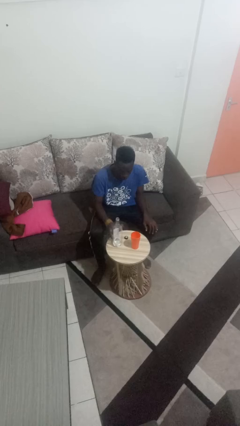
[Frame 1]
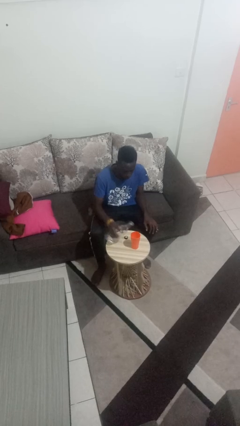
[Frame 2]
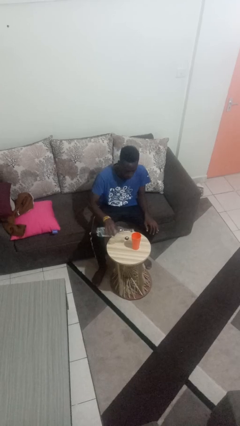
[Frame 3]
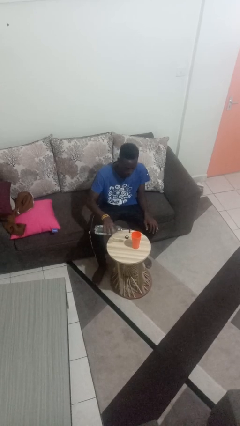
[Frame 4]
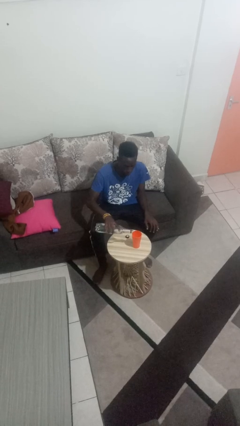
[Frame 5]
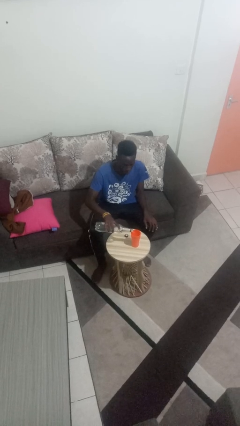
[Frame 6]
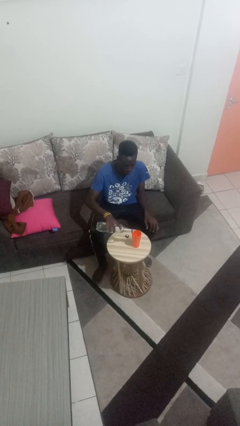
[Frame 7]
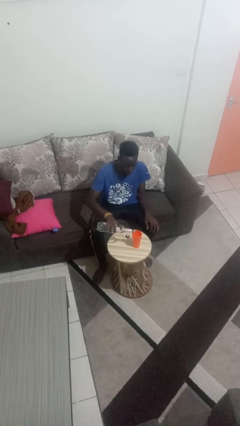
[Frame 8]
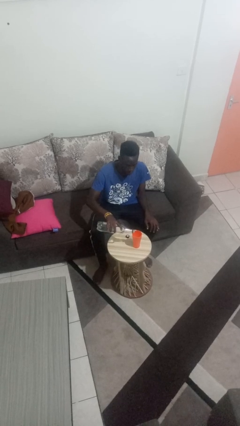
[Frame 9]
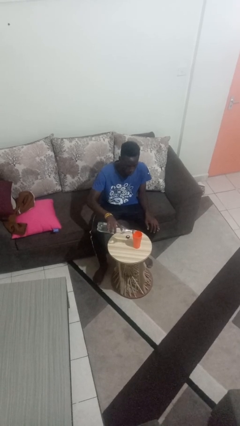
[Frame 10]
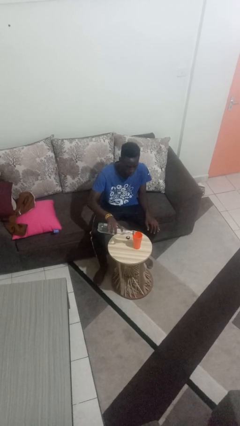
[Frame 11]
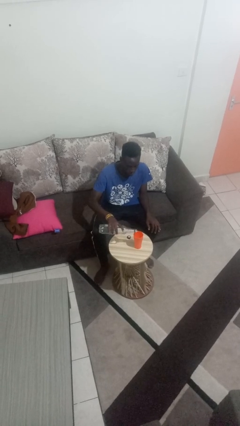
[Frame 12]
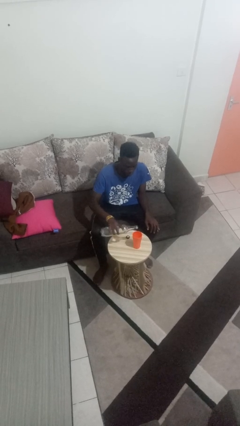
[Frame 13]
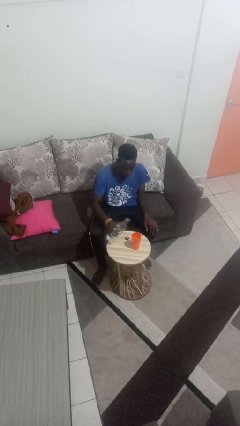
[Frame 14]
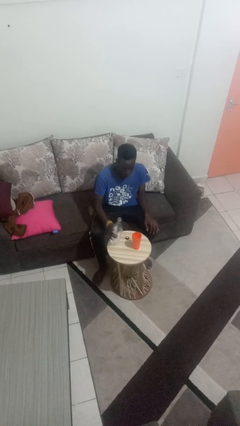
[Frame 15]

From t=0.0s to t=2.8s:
person pours liquid into cup

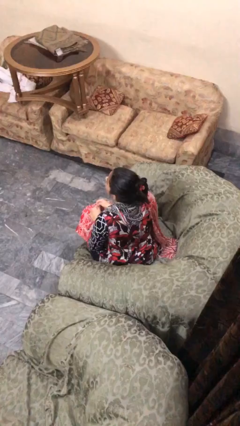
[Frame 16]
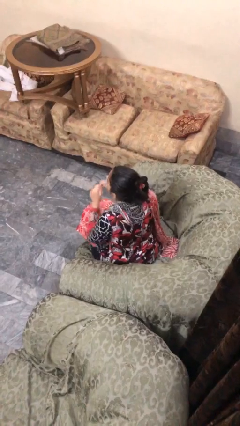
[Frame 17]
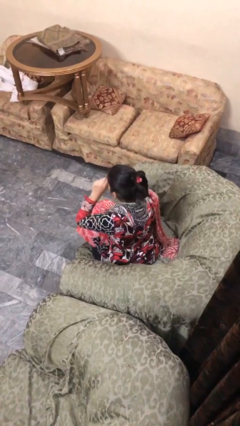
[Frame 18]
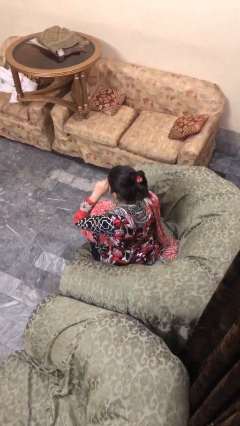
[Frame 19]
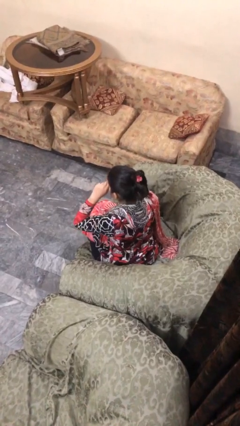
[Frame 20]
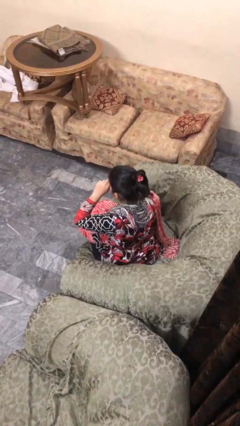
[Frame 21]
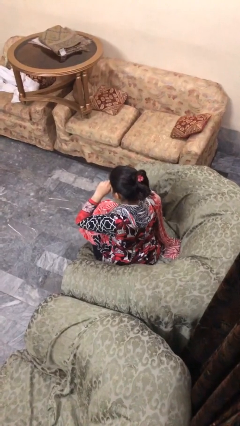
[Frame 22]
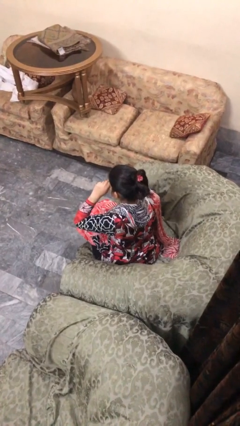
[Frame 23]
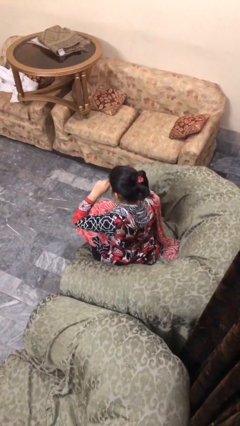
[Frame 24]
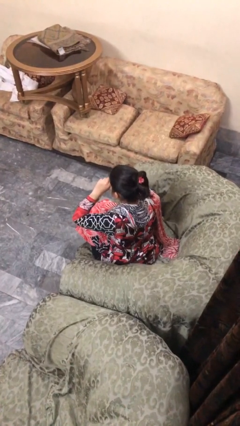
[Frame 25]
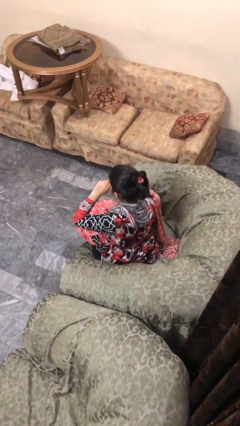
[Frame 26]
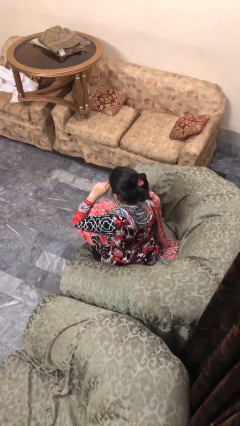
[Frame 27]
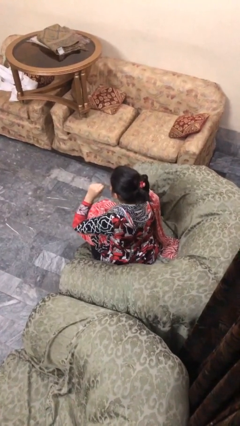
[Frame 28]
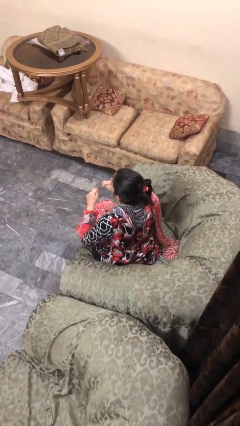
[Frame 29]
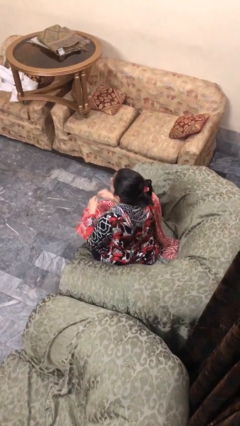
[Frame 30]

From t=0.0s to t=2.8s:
person rubs eyes

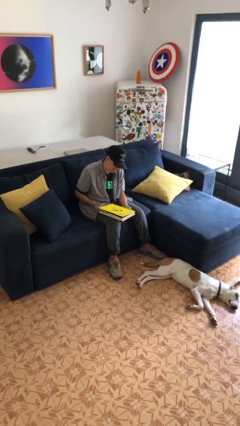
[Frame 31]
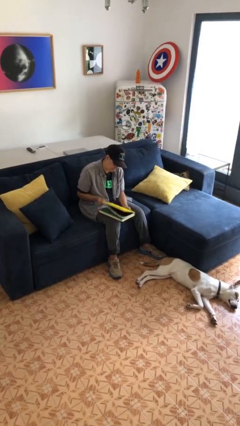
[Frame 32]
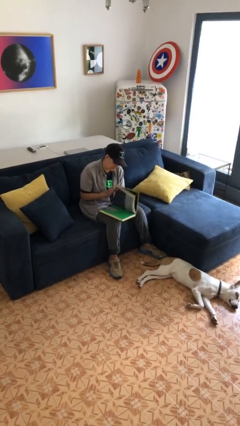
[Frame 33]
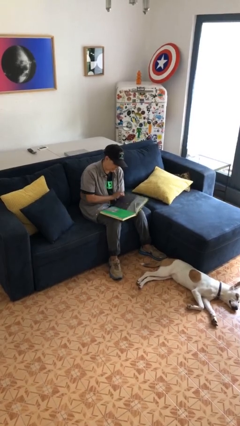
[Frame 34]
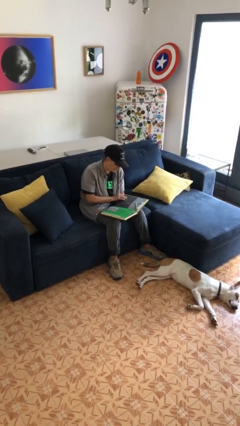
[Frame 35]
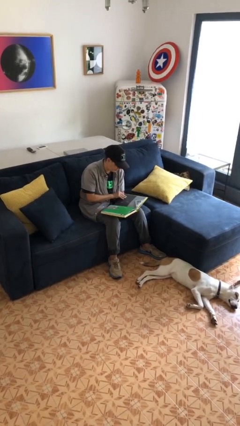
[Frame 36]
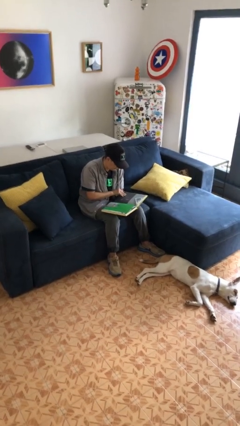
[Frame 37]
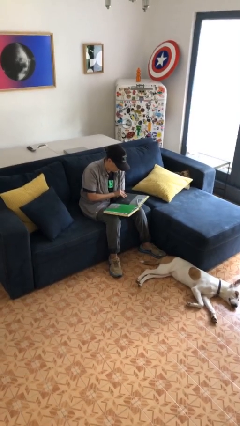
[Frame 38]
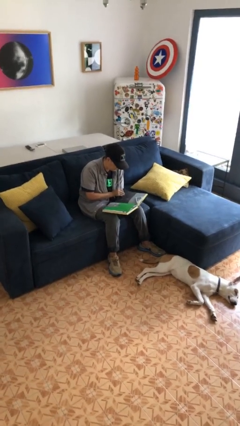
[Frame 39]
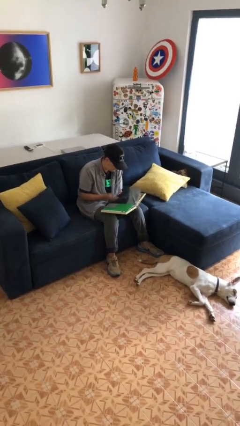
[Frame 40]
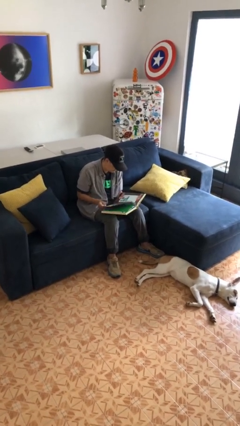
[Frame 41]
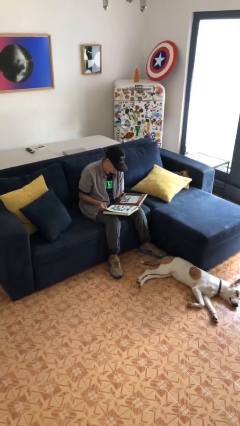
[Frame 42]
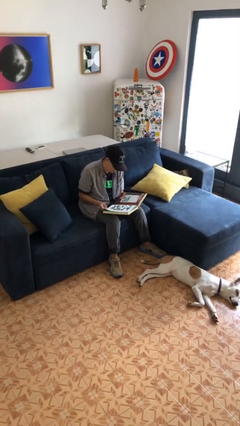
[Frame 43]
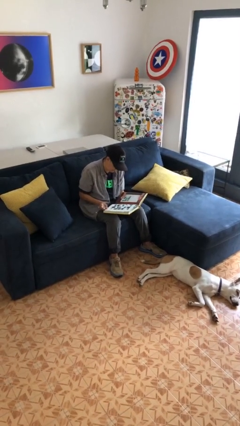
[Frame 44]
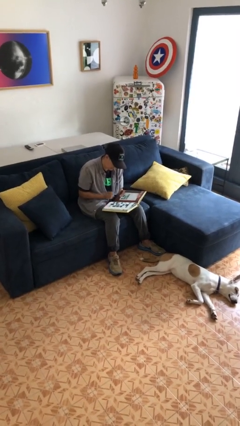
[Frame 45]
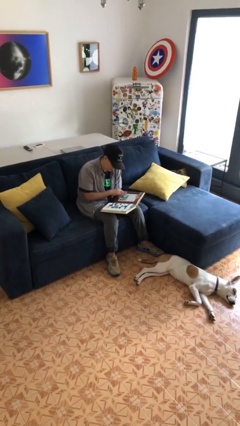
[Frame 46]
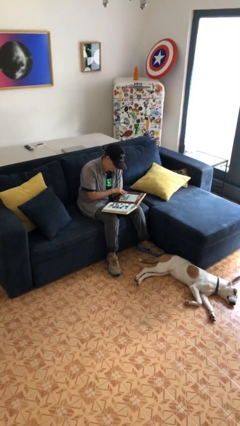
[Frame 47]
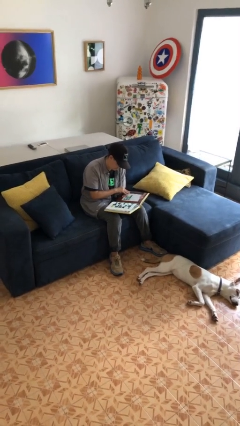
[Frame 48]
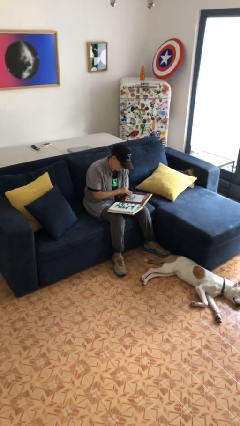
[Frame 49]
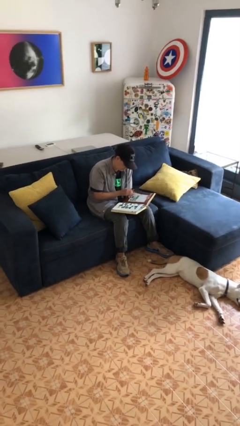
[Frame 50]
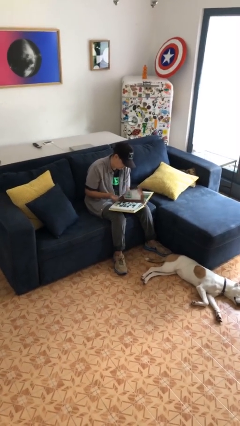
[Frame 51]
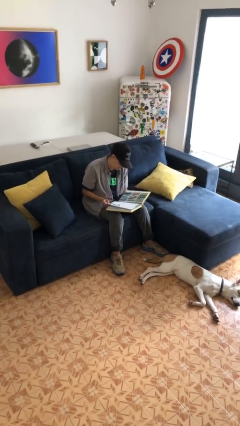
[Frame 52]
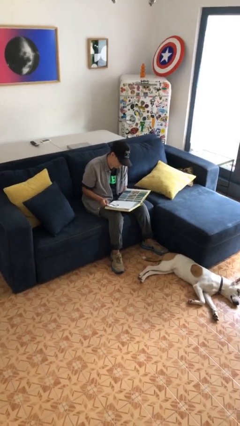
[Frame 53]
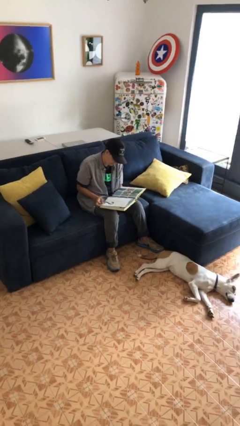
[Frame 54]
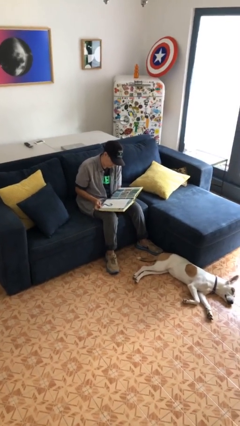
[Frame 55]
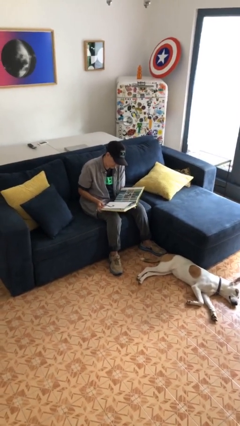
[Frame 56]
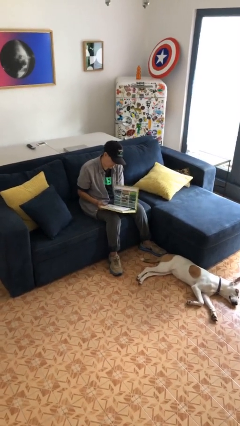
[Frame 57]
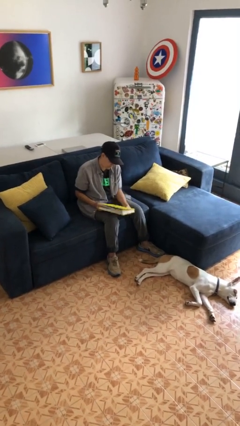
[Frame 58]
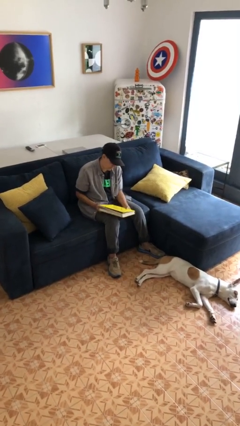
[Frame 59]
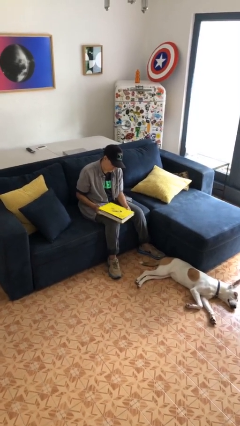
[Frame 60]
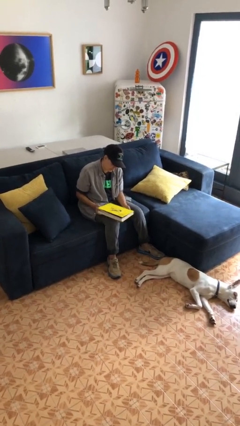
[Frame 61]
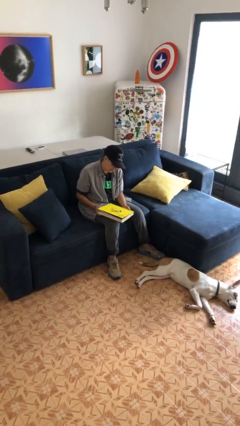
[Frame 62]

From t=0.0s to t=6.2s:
person reads book

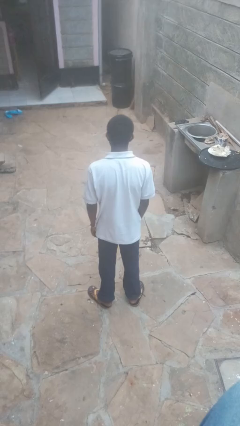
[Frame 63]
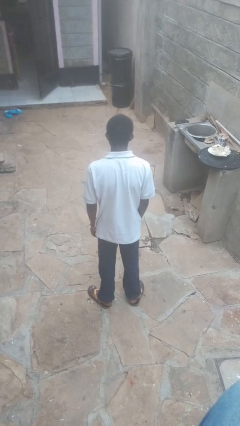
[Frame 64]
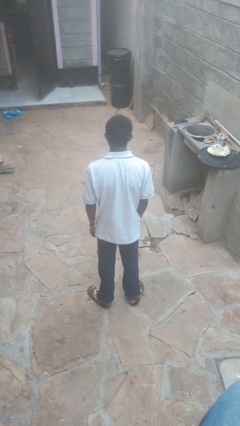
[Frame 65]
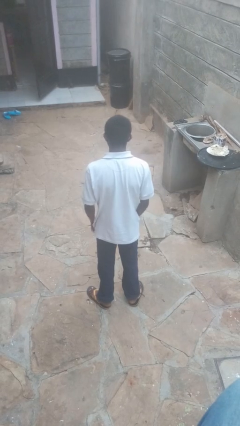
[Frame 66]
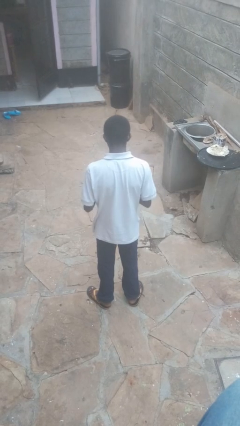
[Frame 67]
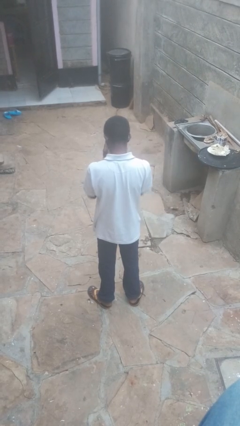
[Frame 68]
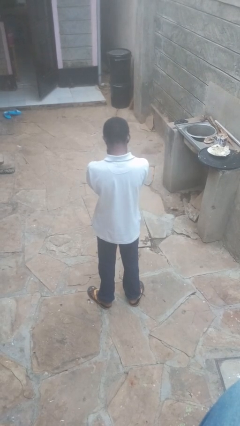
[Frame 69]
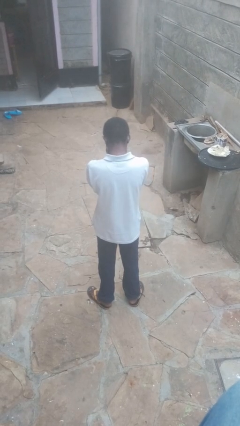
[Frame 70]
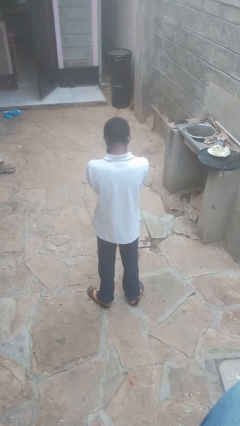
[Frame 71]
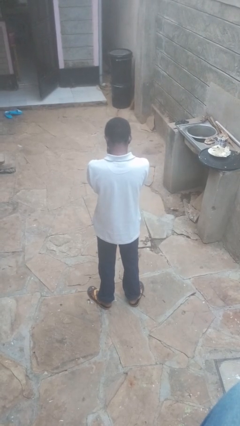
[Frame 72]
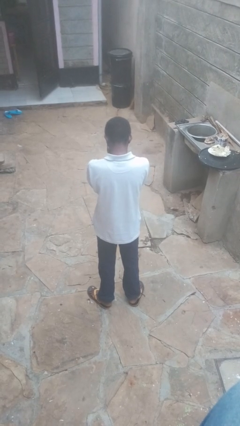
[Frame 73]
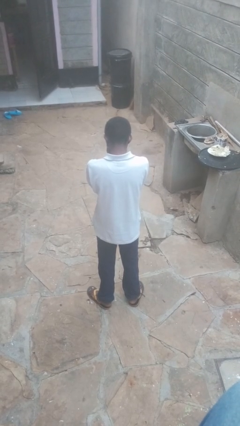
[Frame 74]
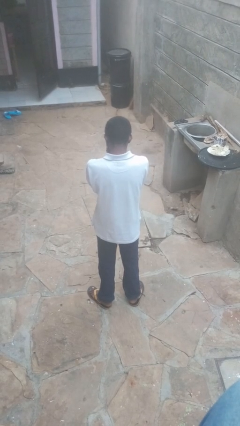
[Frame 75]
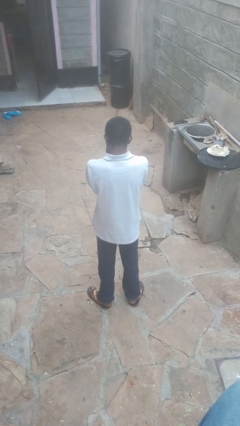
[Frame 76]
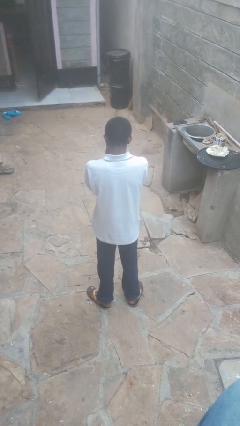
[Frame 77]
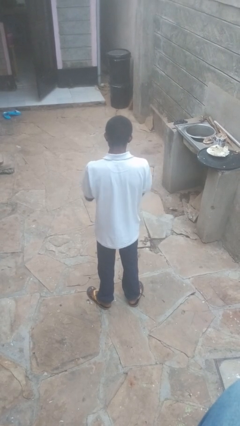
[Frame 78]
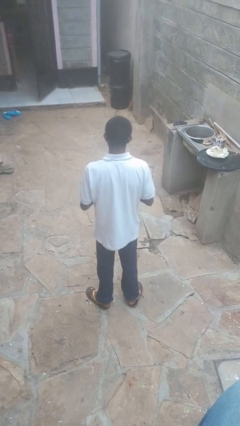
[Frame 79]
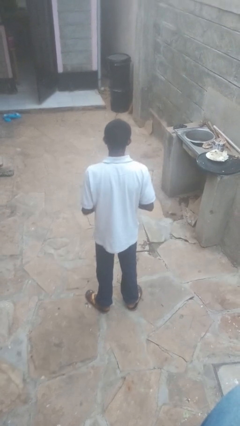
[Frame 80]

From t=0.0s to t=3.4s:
person covers face with hands

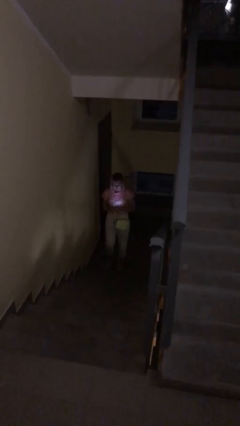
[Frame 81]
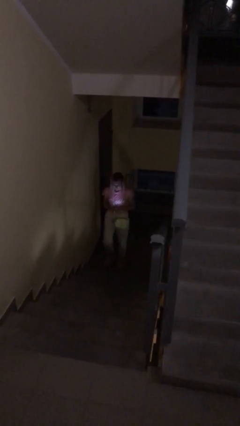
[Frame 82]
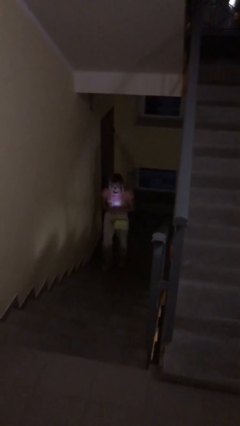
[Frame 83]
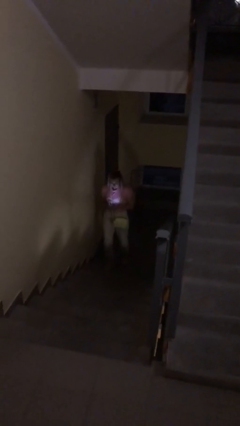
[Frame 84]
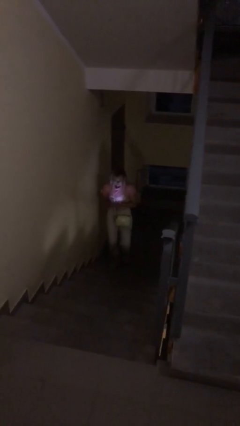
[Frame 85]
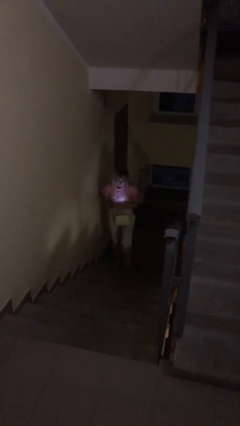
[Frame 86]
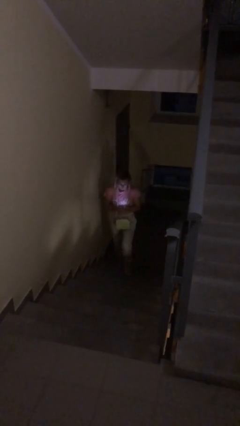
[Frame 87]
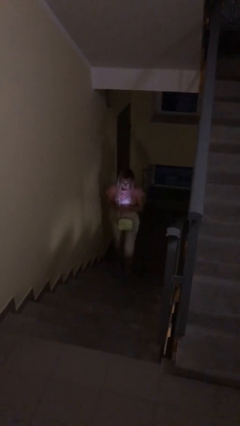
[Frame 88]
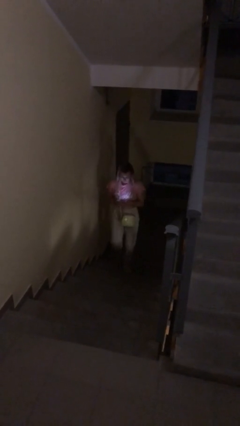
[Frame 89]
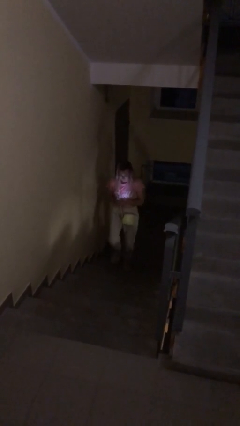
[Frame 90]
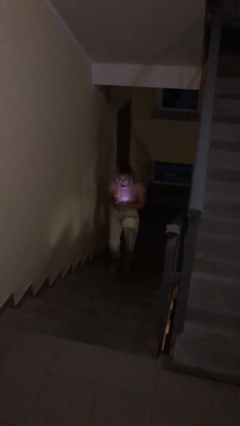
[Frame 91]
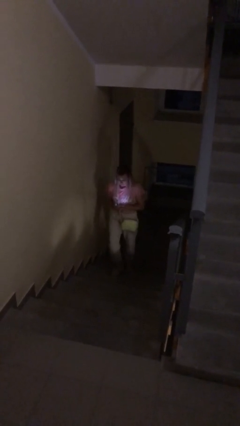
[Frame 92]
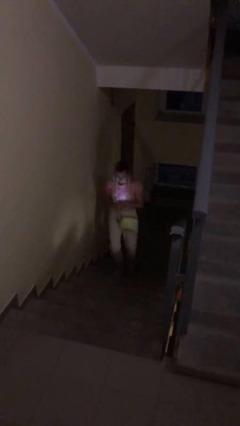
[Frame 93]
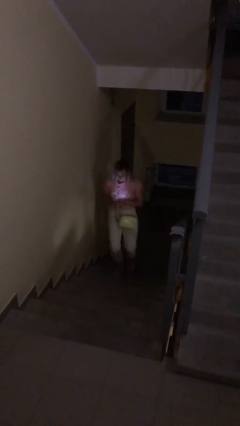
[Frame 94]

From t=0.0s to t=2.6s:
person climbs up stairs
